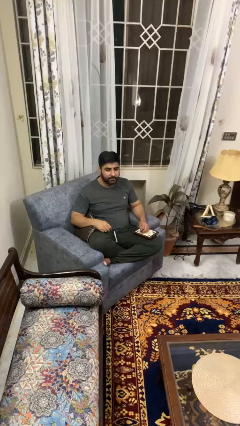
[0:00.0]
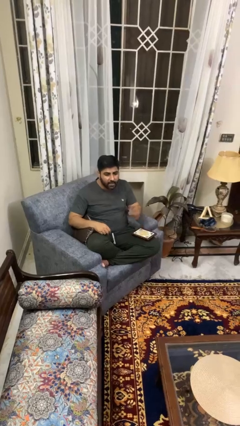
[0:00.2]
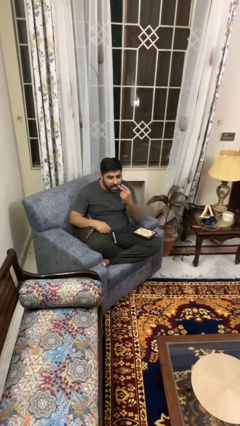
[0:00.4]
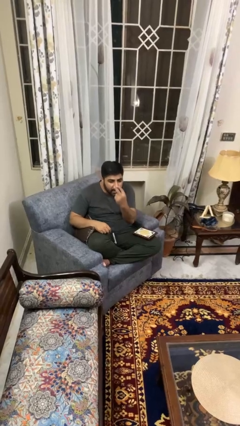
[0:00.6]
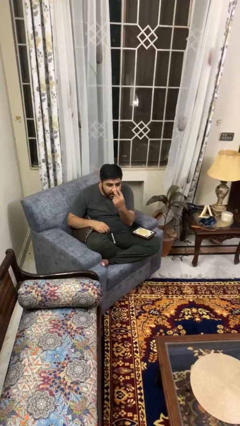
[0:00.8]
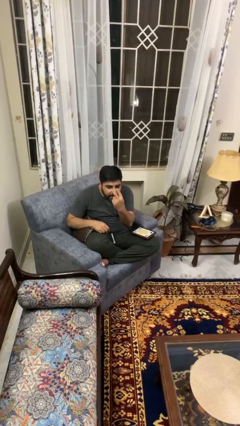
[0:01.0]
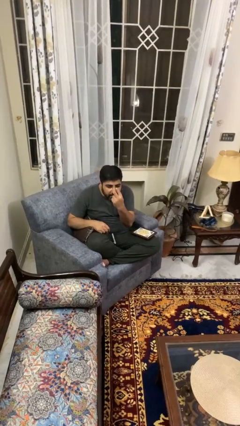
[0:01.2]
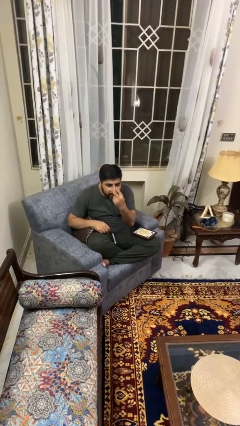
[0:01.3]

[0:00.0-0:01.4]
person gestures watch closely

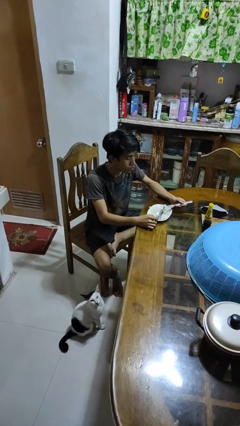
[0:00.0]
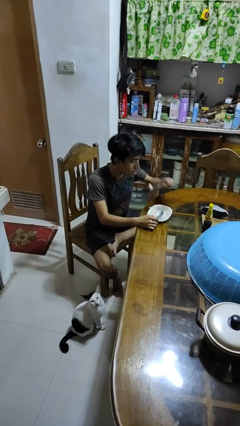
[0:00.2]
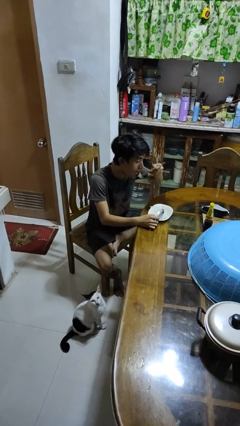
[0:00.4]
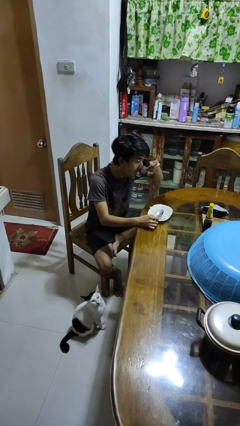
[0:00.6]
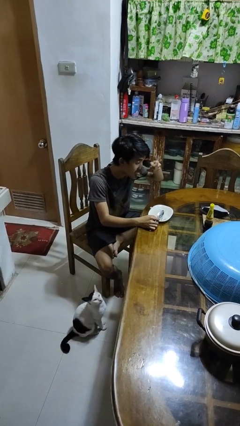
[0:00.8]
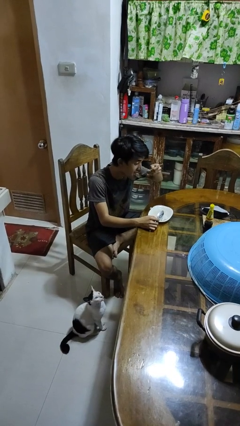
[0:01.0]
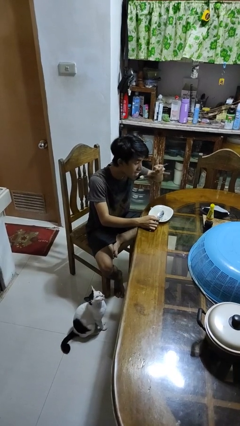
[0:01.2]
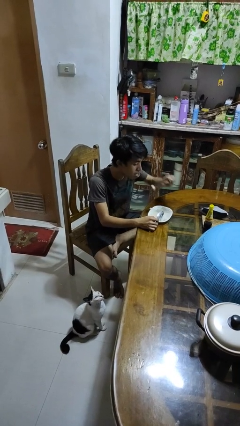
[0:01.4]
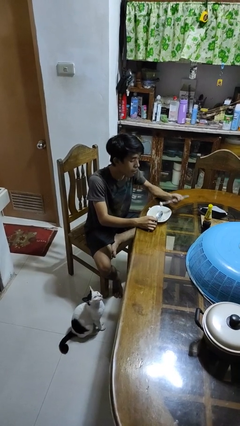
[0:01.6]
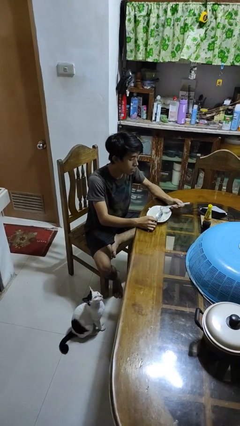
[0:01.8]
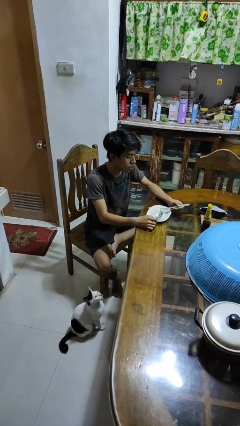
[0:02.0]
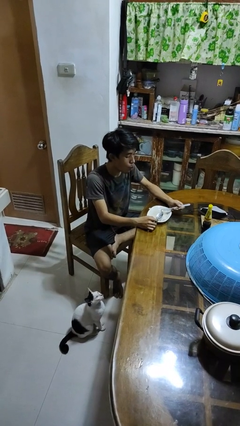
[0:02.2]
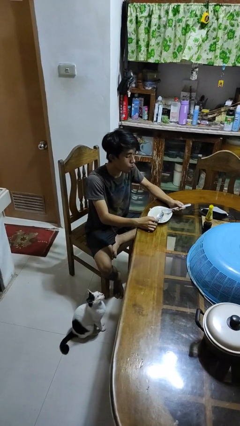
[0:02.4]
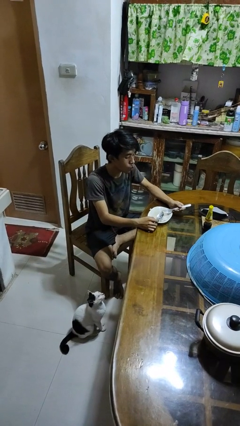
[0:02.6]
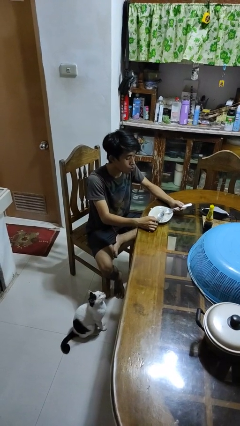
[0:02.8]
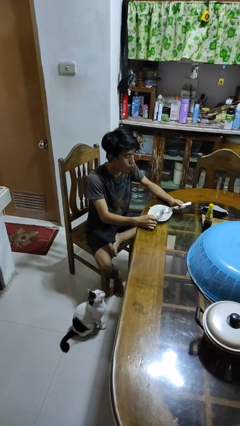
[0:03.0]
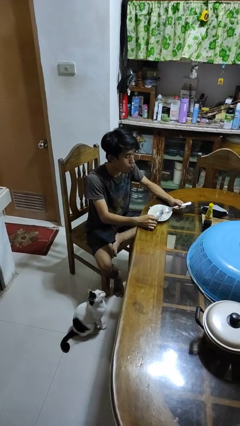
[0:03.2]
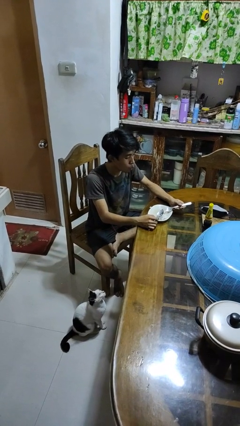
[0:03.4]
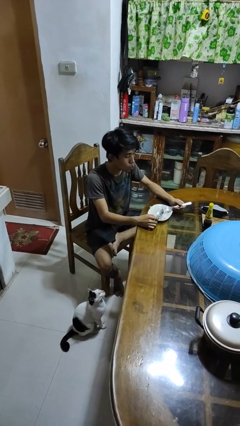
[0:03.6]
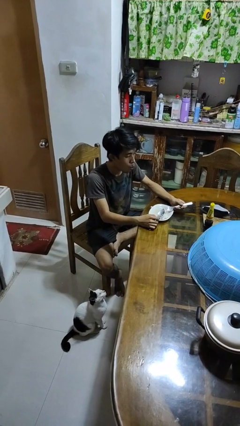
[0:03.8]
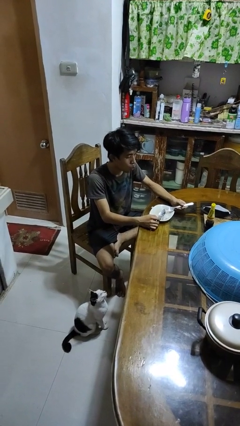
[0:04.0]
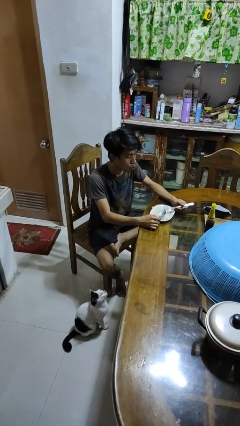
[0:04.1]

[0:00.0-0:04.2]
person eats with utensil

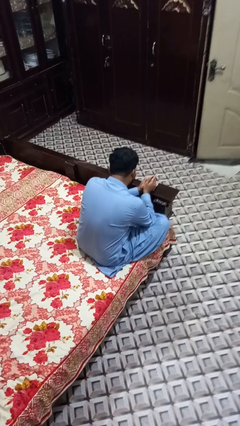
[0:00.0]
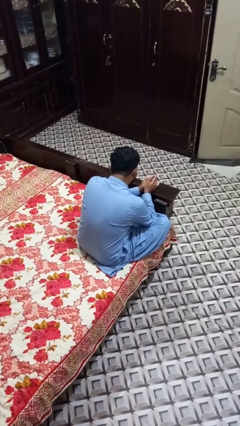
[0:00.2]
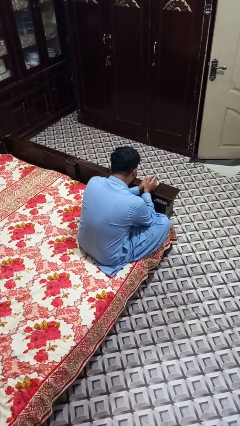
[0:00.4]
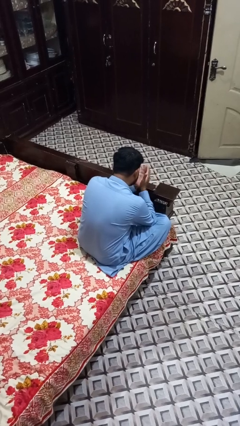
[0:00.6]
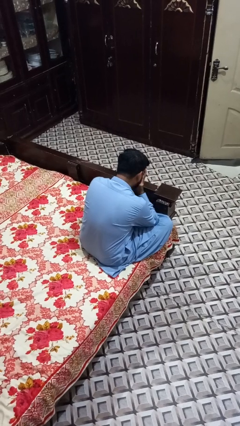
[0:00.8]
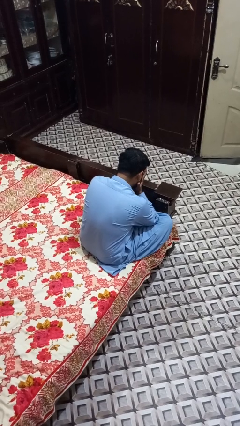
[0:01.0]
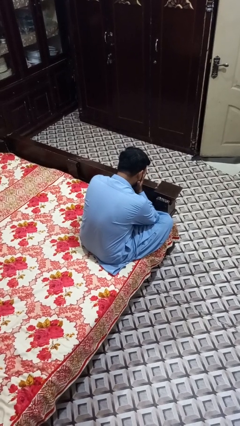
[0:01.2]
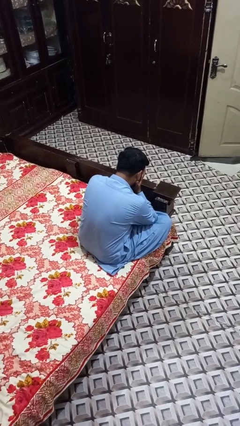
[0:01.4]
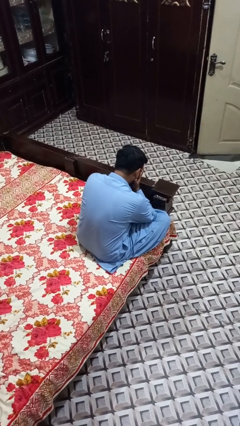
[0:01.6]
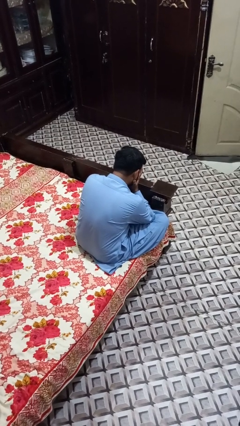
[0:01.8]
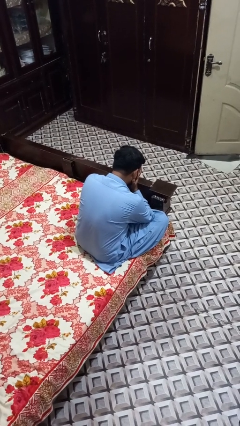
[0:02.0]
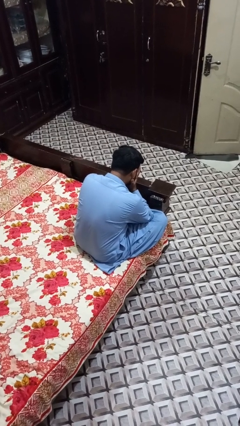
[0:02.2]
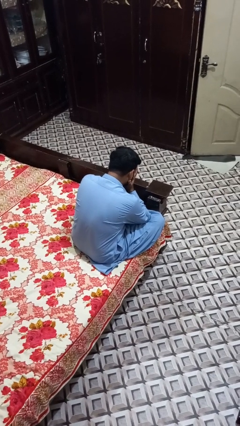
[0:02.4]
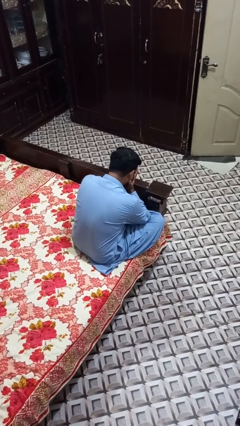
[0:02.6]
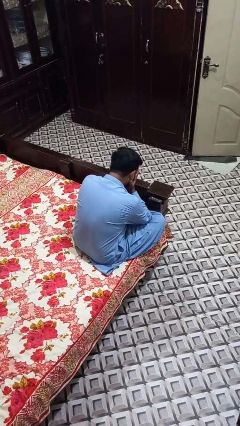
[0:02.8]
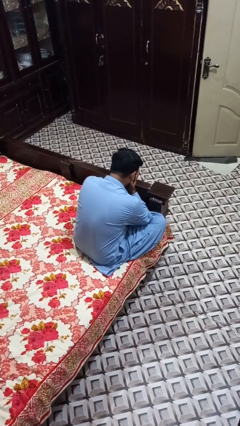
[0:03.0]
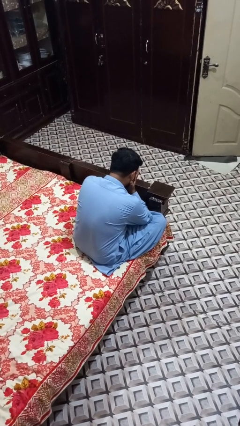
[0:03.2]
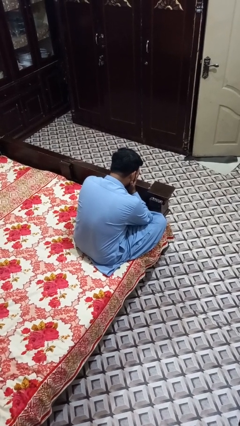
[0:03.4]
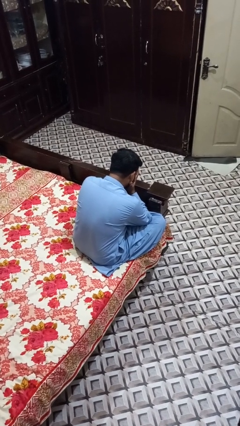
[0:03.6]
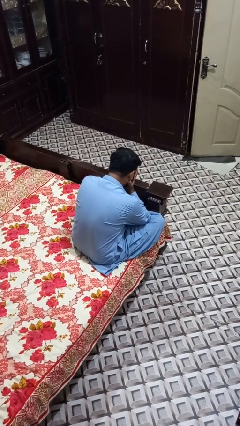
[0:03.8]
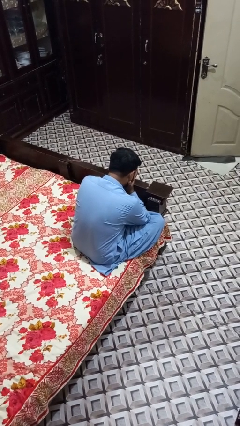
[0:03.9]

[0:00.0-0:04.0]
person covers face with hands

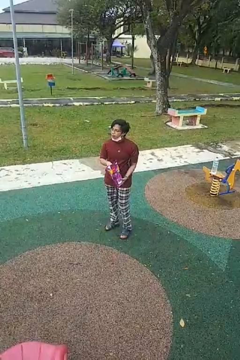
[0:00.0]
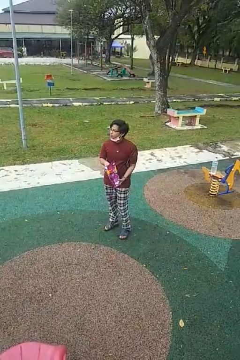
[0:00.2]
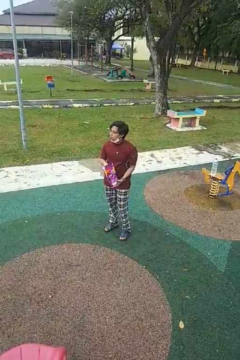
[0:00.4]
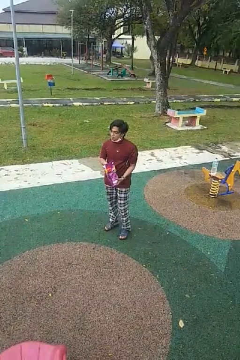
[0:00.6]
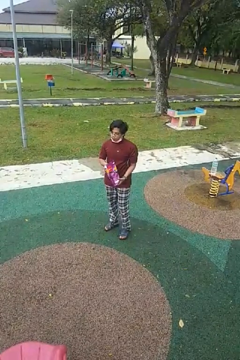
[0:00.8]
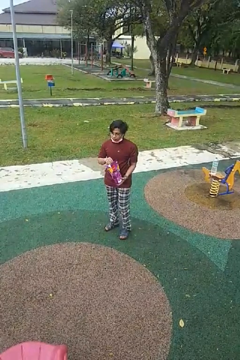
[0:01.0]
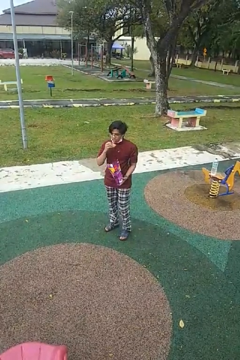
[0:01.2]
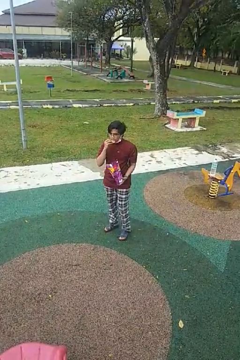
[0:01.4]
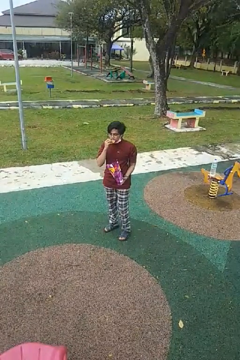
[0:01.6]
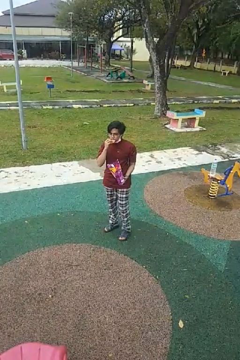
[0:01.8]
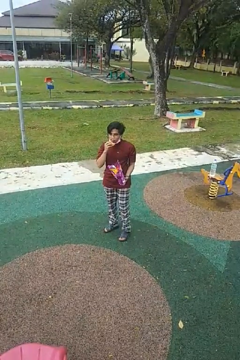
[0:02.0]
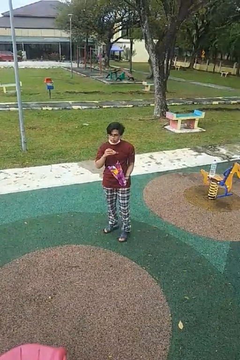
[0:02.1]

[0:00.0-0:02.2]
person eats snack from bag

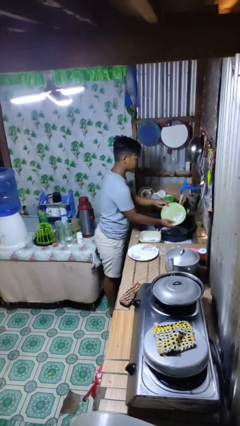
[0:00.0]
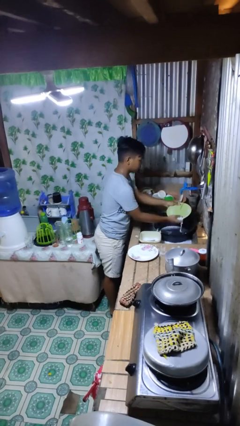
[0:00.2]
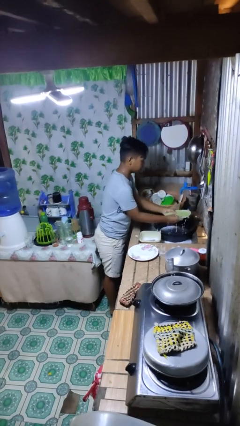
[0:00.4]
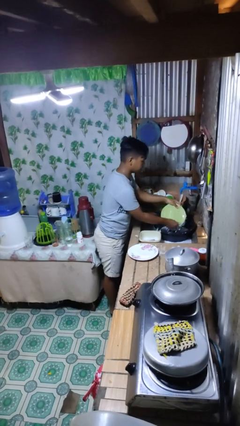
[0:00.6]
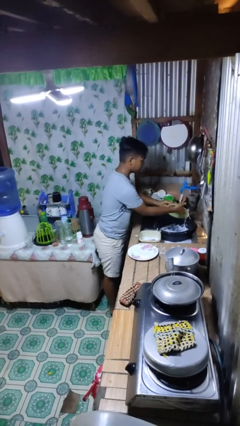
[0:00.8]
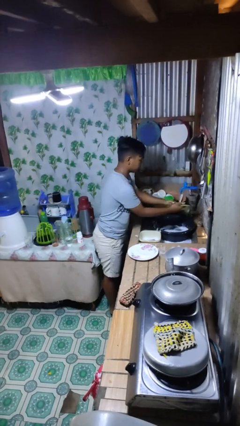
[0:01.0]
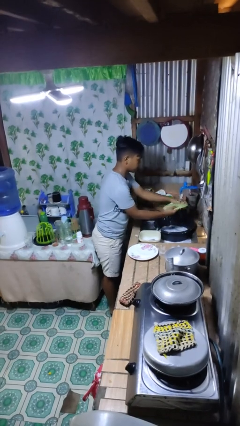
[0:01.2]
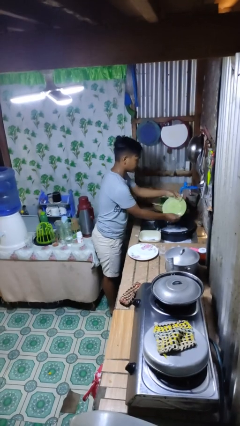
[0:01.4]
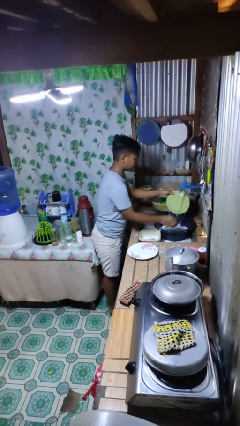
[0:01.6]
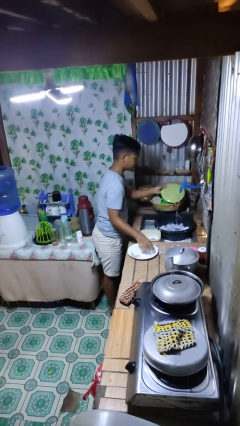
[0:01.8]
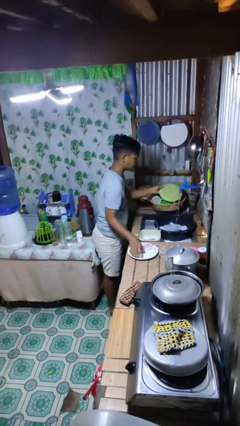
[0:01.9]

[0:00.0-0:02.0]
person washes dish

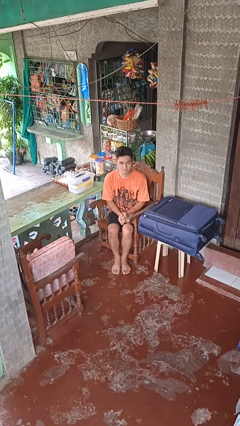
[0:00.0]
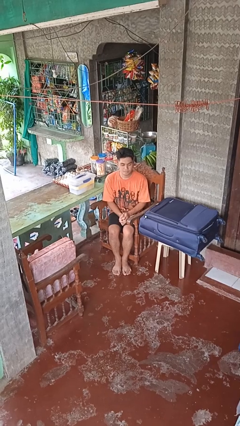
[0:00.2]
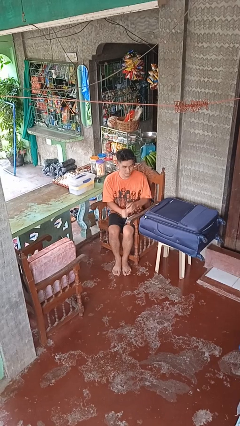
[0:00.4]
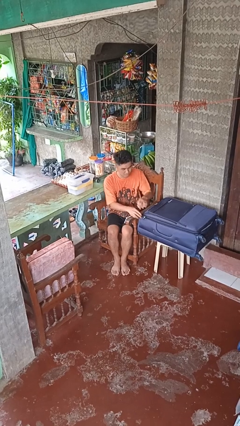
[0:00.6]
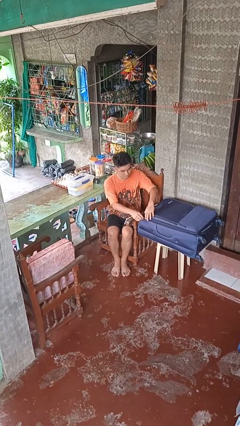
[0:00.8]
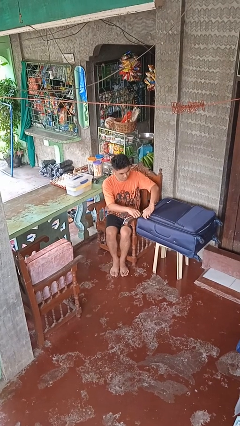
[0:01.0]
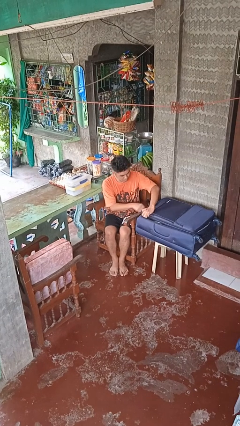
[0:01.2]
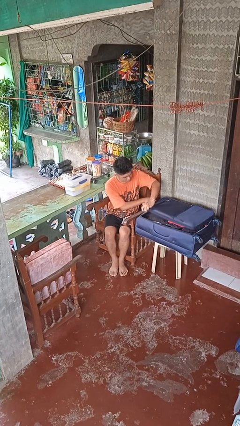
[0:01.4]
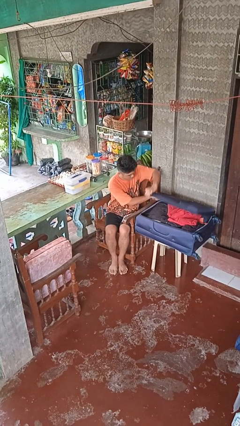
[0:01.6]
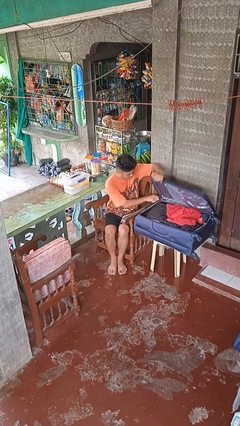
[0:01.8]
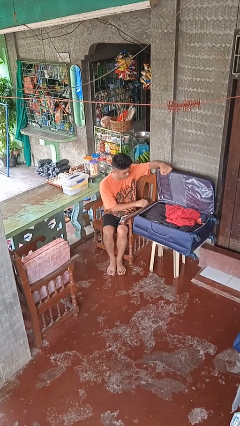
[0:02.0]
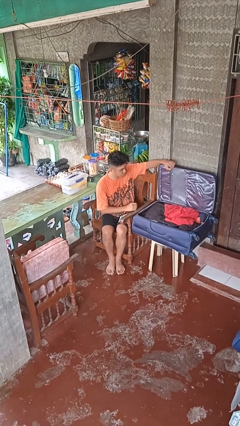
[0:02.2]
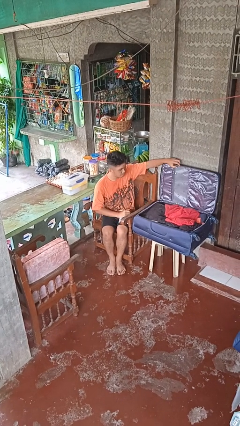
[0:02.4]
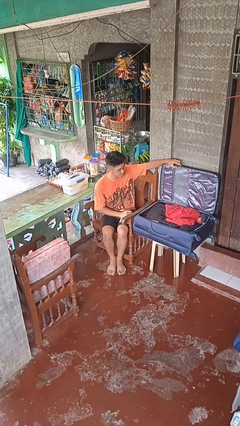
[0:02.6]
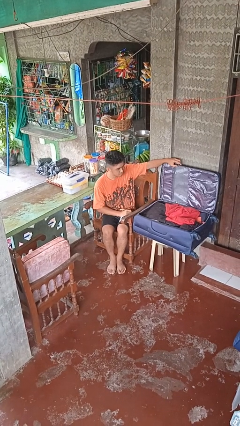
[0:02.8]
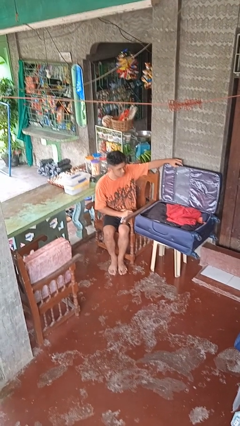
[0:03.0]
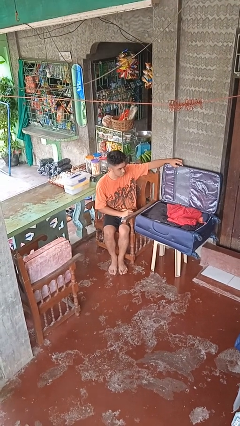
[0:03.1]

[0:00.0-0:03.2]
person opens suitcase

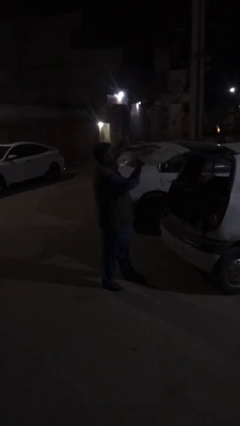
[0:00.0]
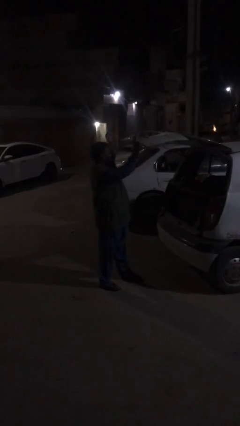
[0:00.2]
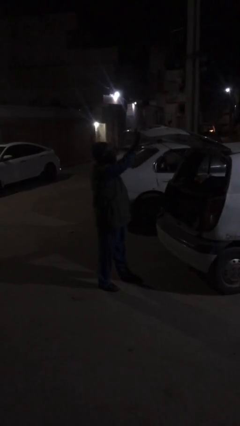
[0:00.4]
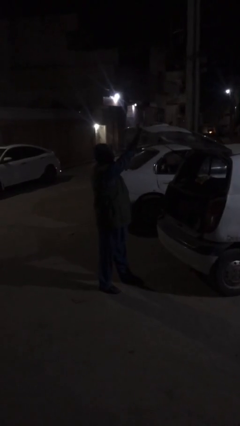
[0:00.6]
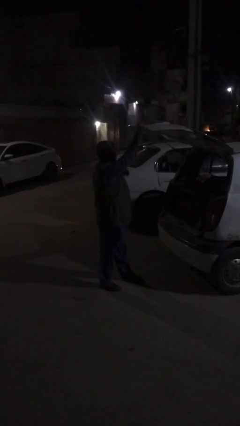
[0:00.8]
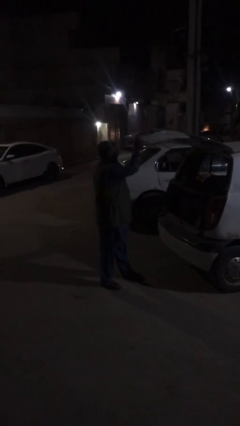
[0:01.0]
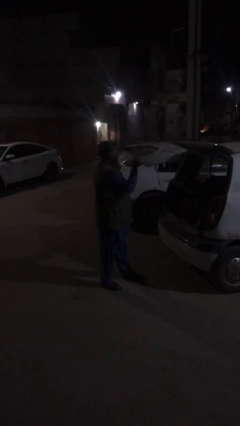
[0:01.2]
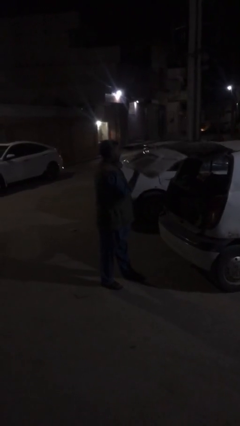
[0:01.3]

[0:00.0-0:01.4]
person opens car trunk
